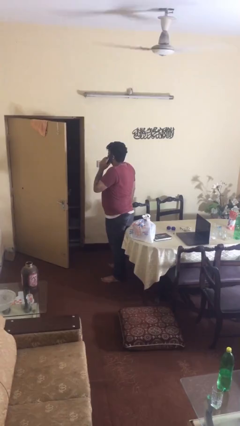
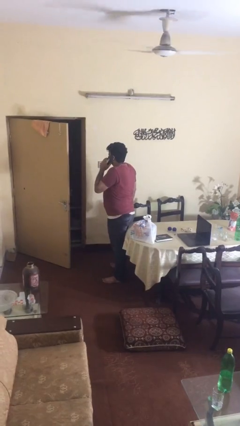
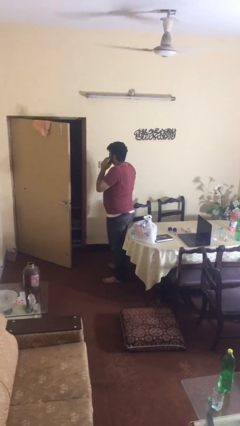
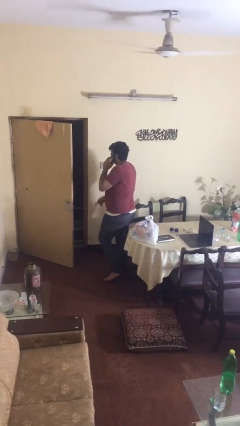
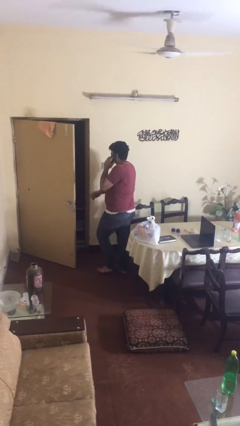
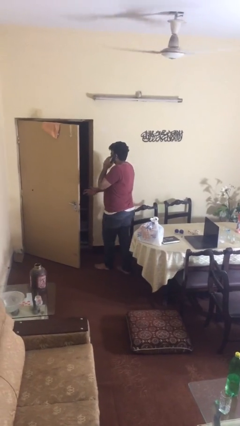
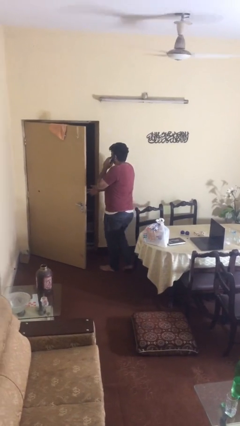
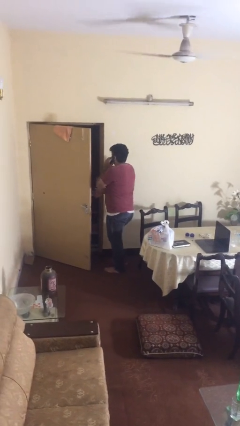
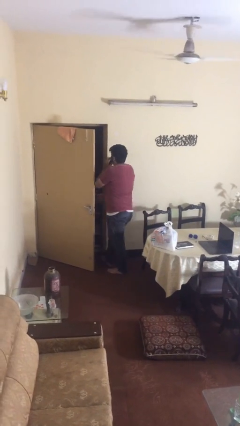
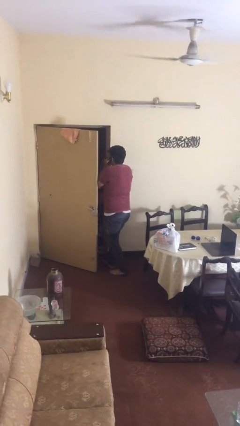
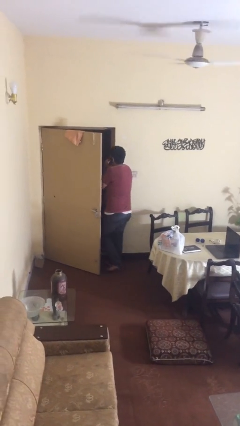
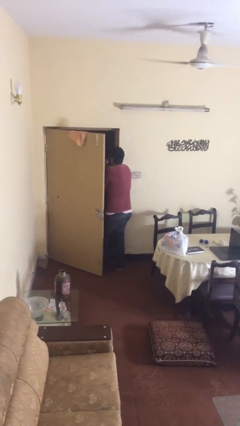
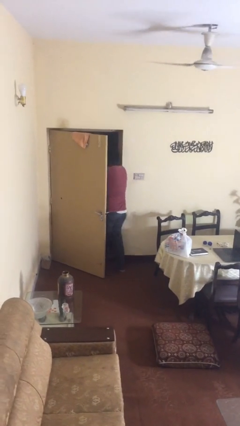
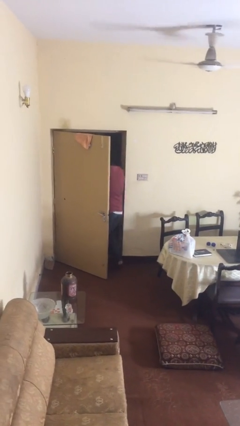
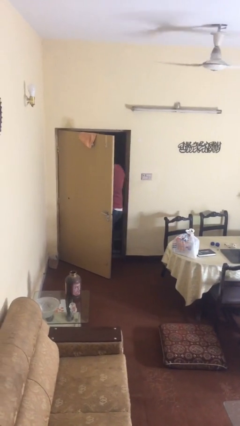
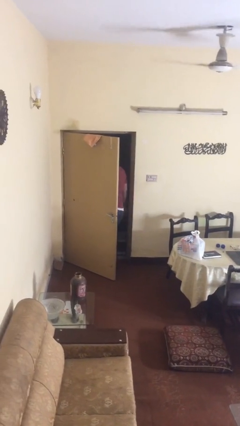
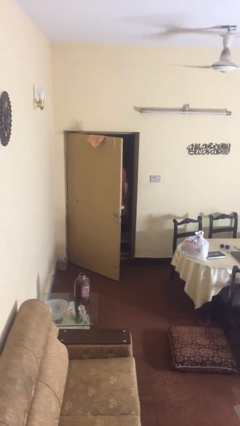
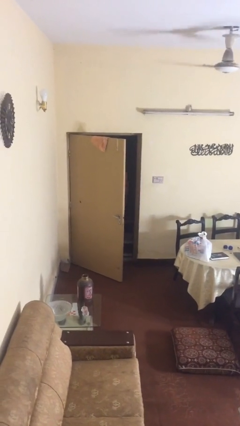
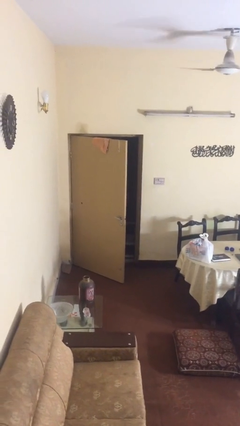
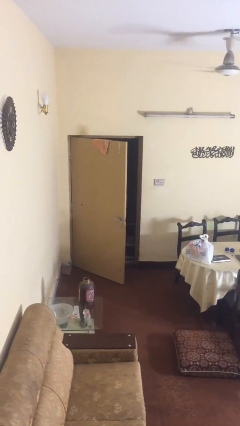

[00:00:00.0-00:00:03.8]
person exits scene through structure

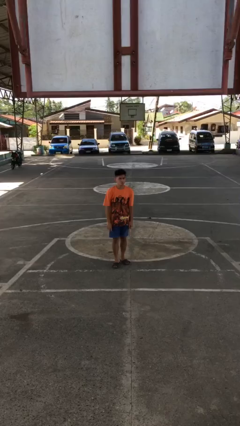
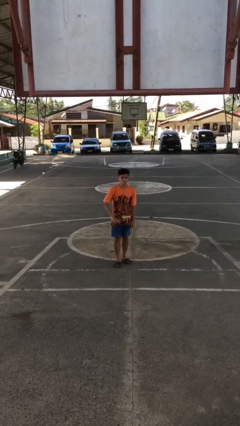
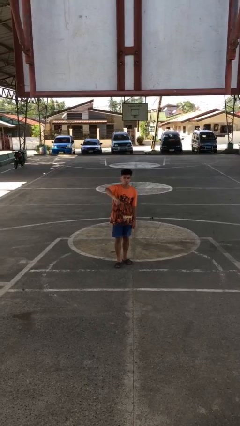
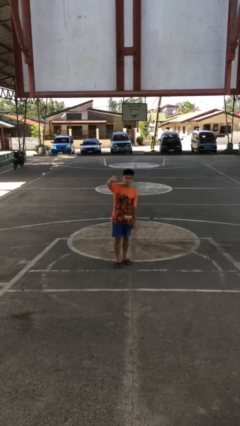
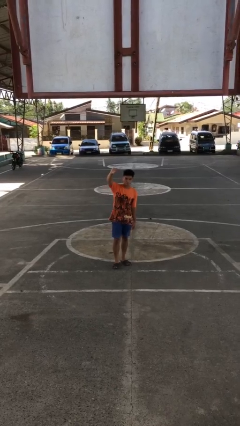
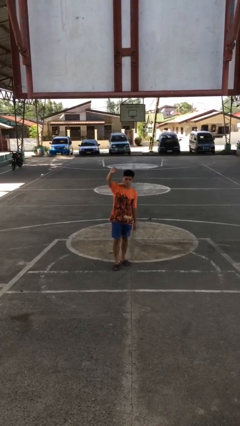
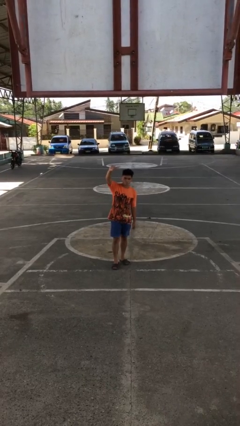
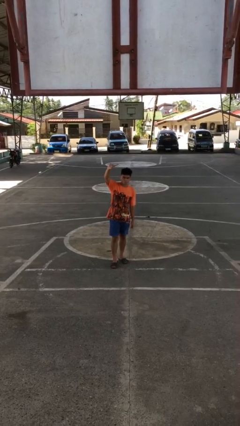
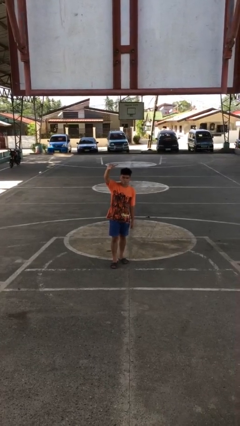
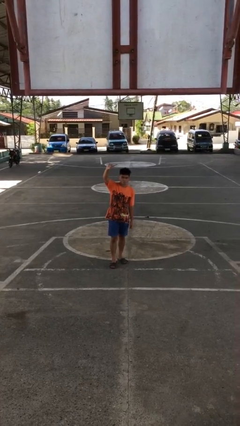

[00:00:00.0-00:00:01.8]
person gestures swipe up

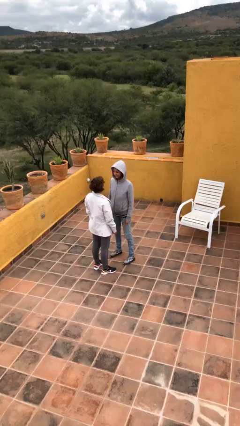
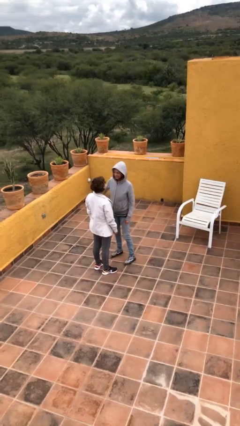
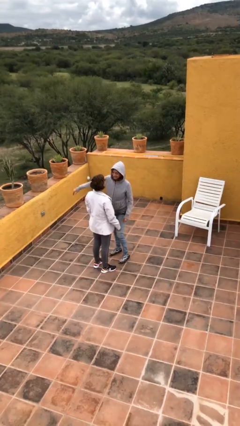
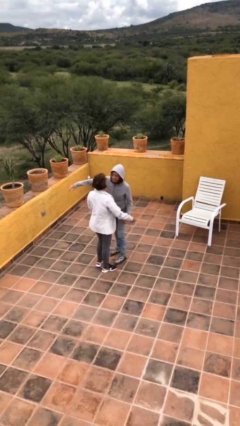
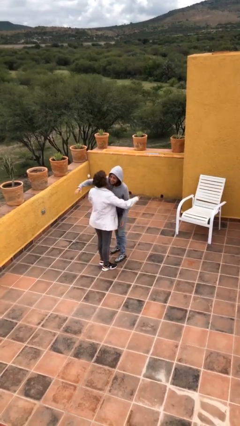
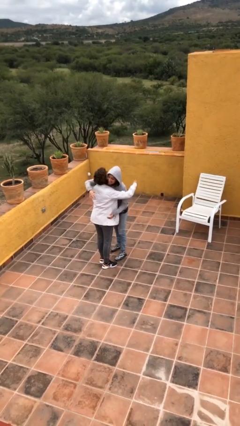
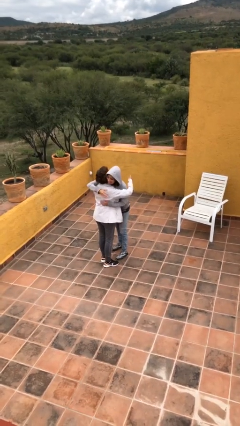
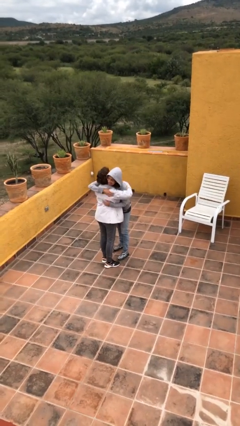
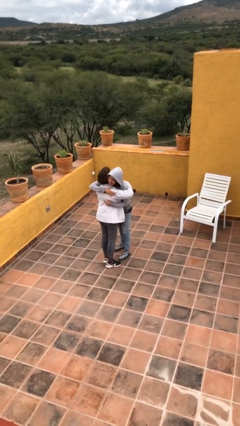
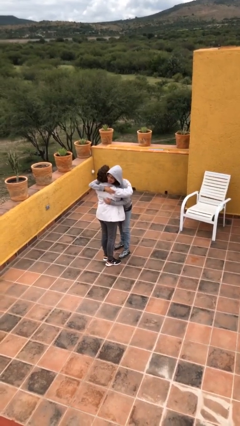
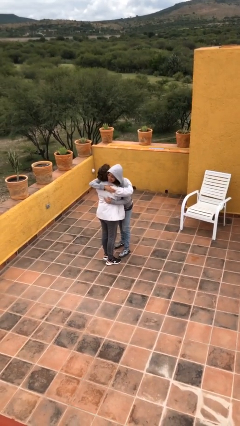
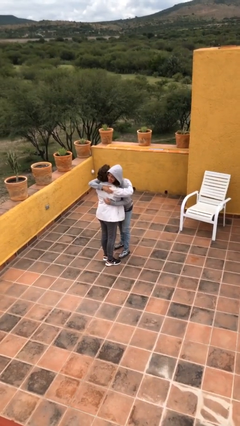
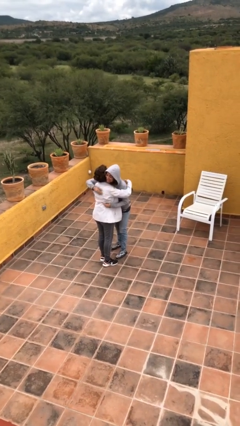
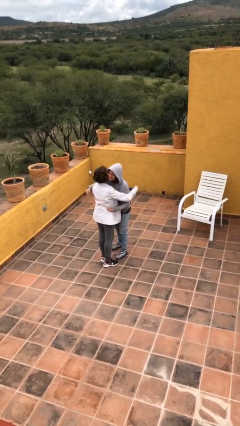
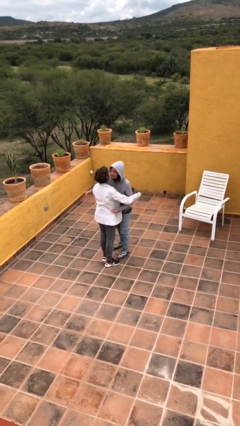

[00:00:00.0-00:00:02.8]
person embraces person

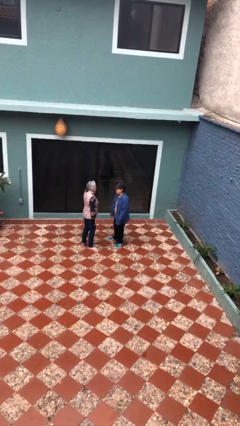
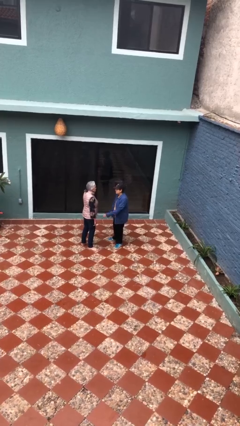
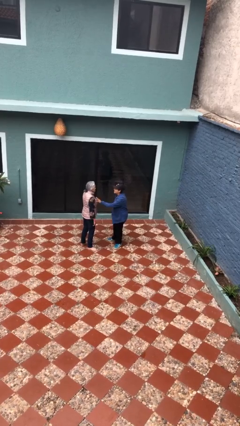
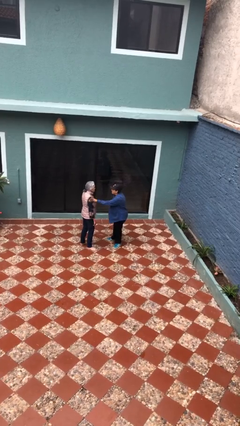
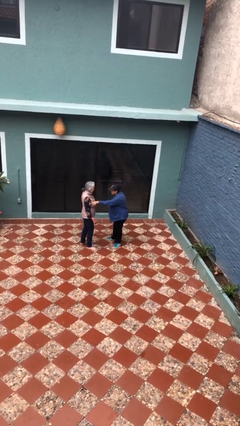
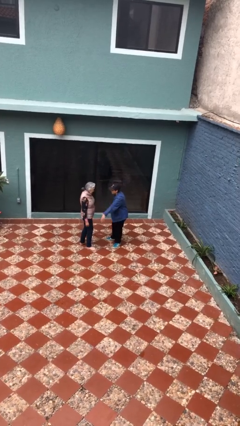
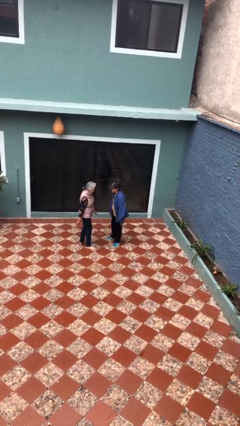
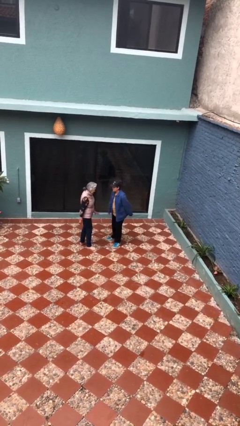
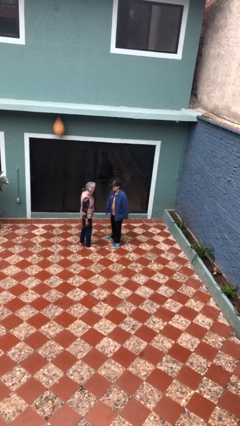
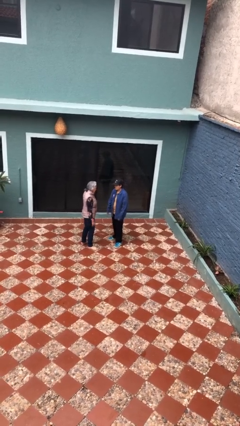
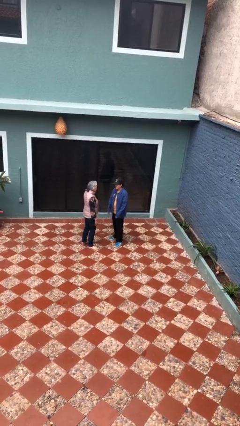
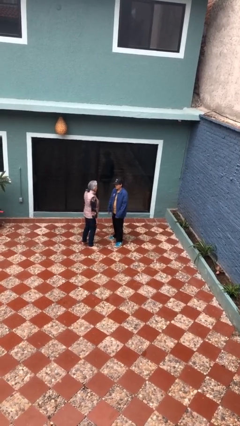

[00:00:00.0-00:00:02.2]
person shoves person

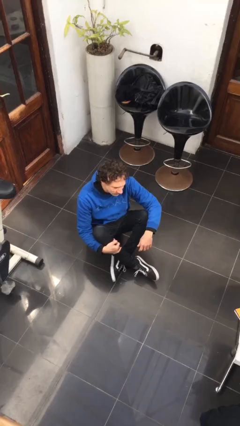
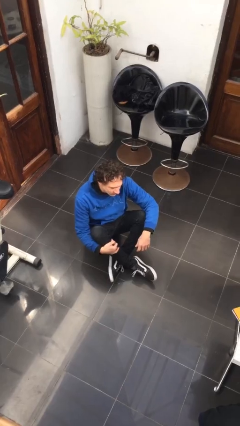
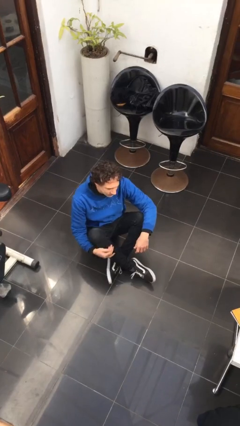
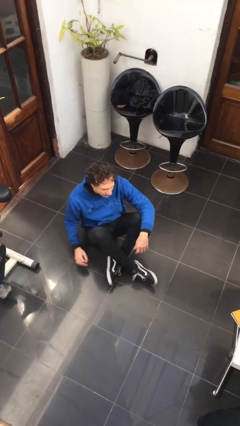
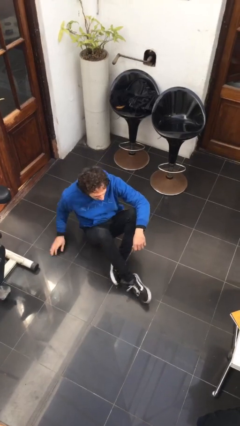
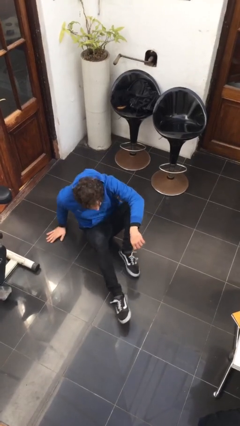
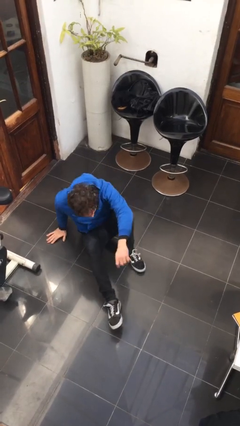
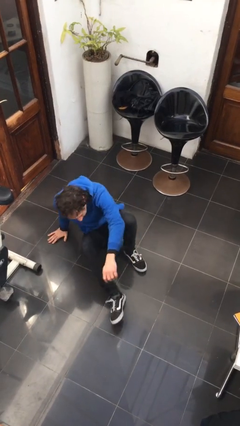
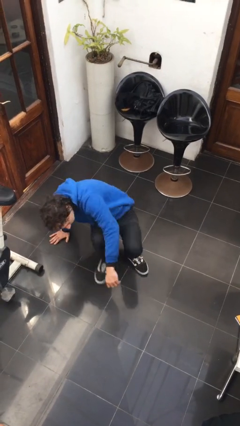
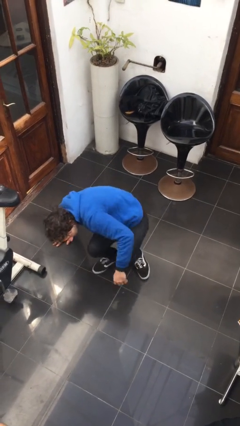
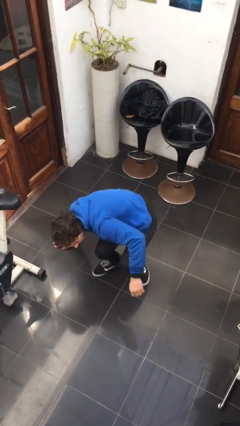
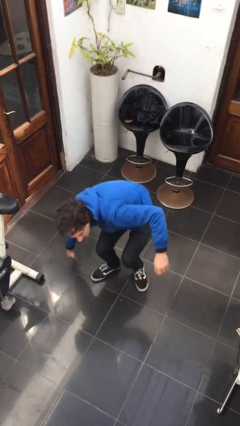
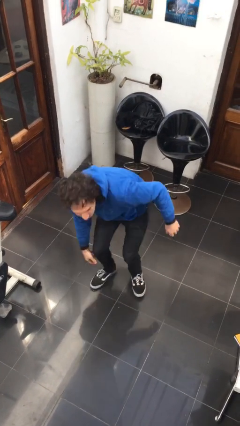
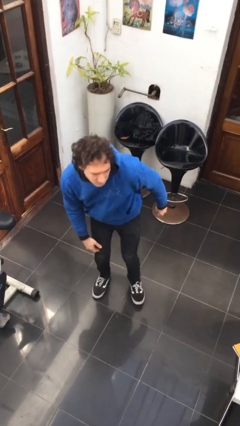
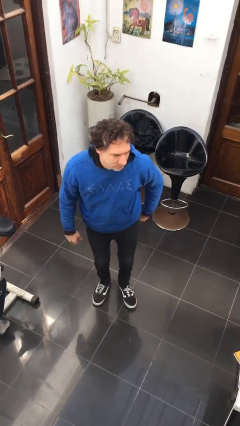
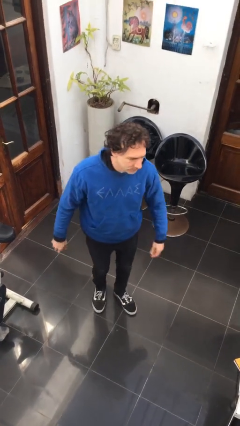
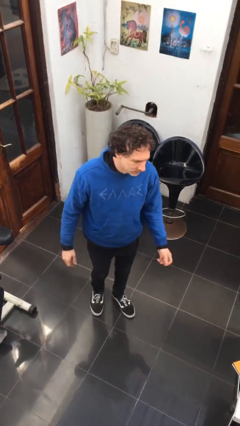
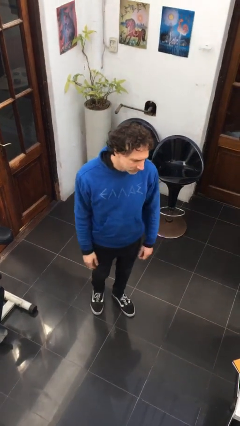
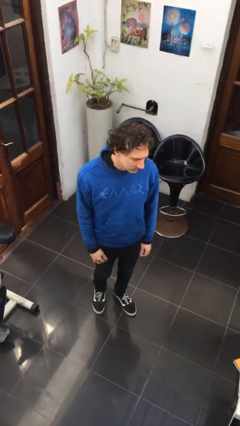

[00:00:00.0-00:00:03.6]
person stands up from floor

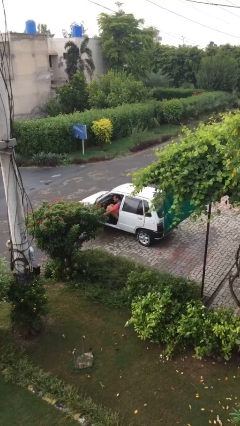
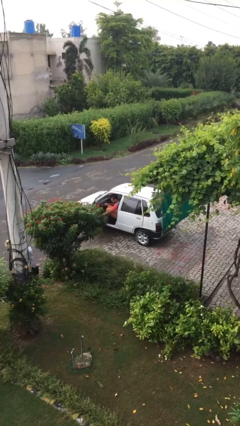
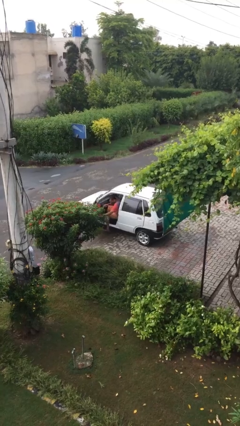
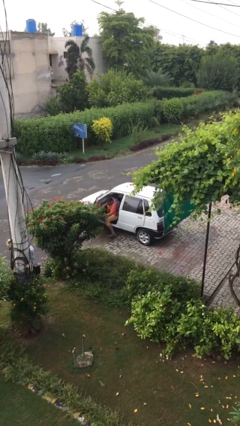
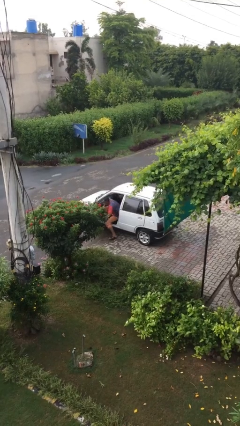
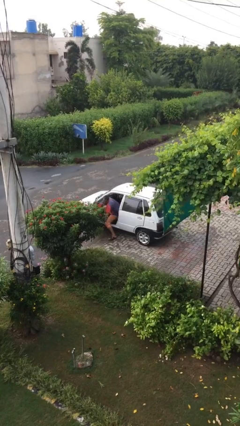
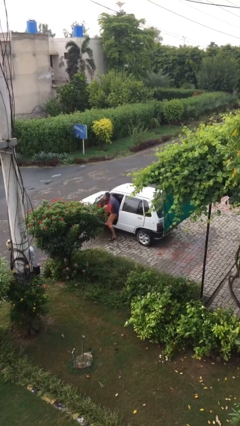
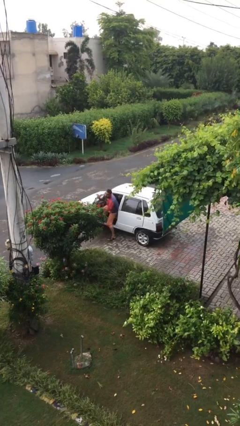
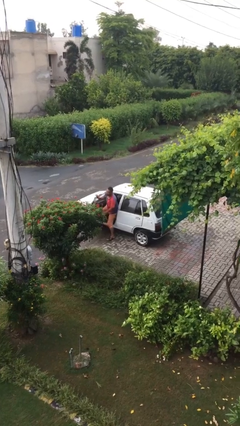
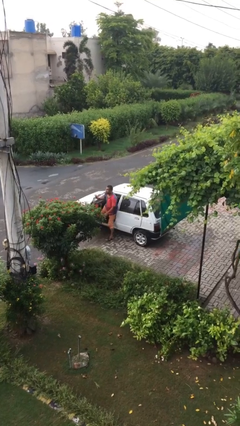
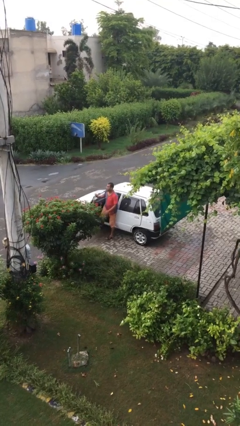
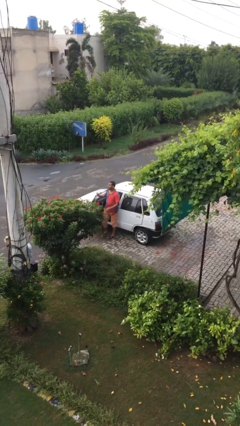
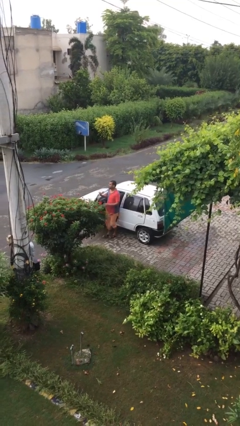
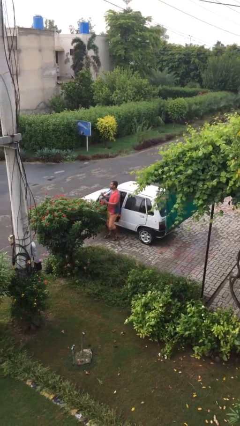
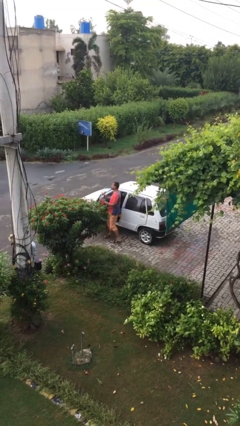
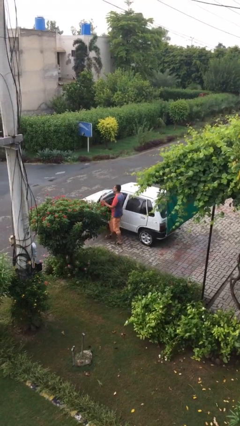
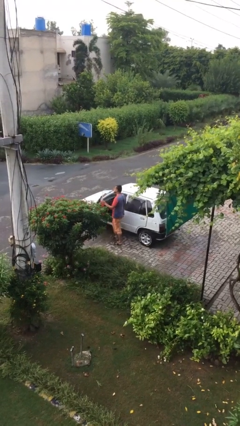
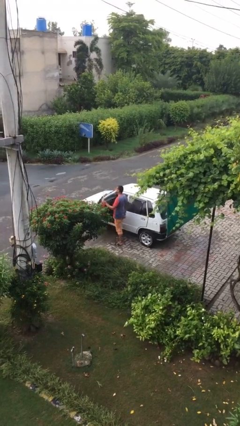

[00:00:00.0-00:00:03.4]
person exits car
